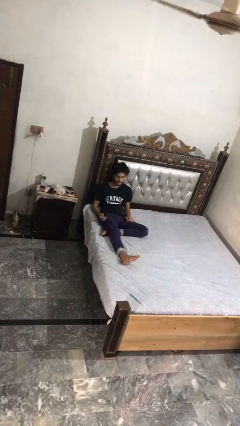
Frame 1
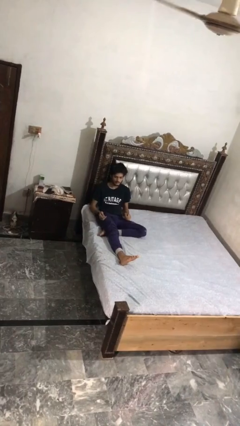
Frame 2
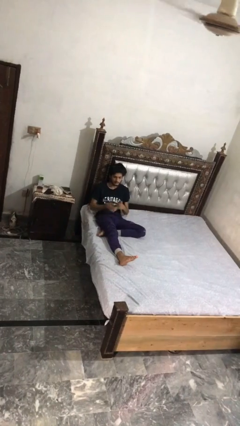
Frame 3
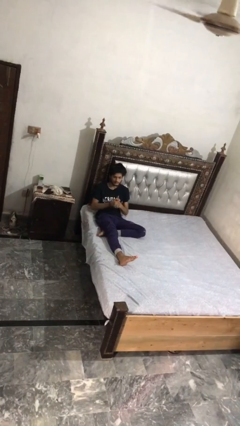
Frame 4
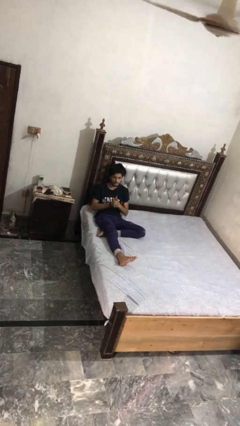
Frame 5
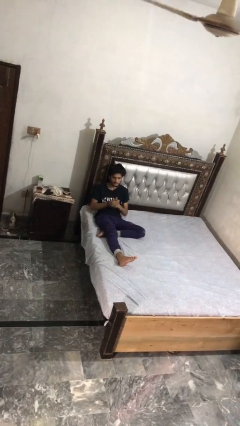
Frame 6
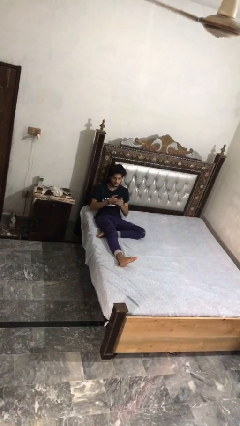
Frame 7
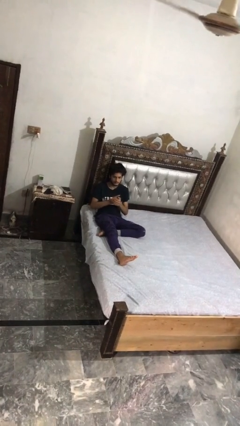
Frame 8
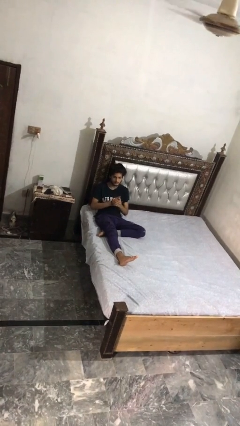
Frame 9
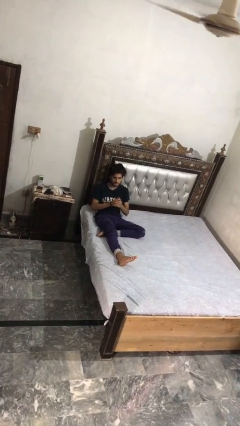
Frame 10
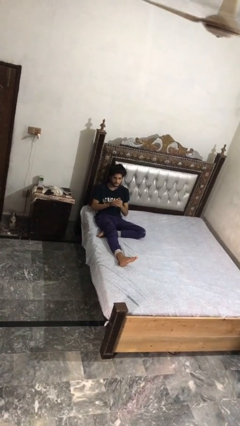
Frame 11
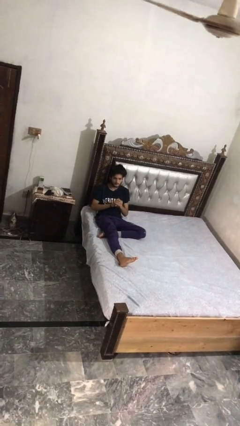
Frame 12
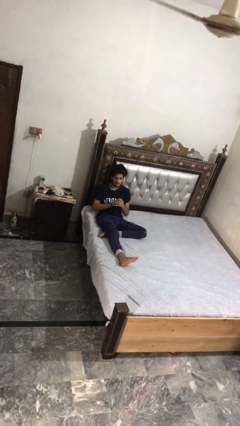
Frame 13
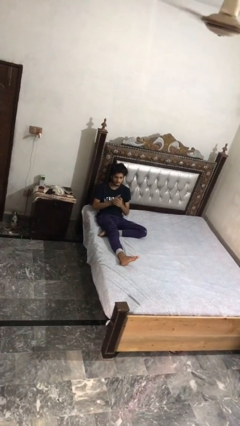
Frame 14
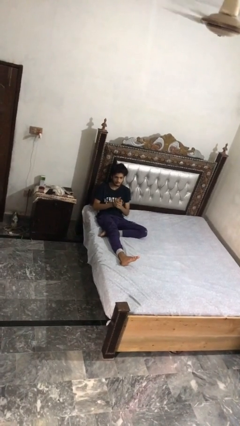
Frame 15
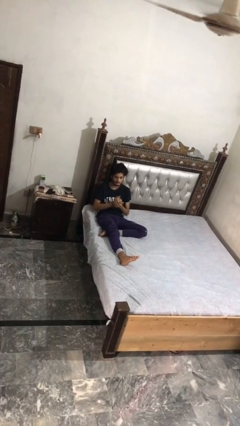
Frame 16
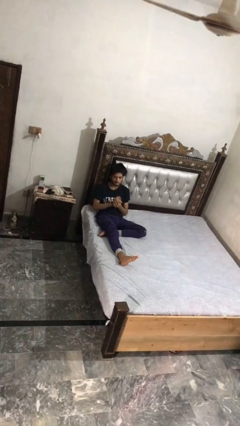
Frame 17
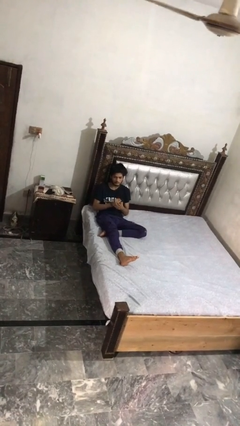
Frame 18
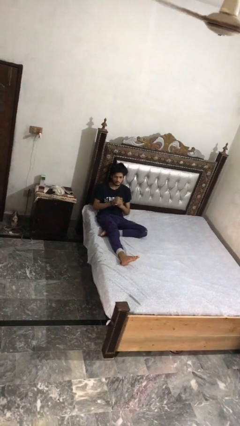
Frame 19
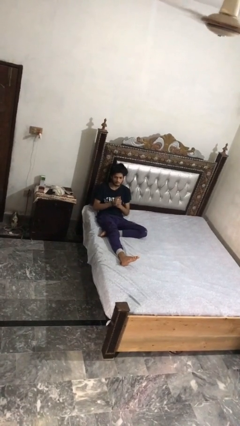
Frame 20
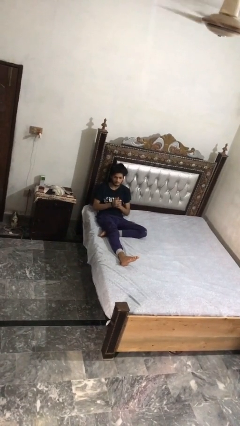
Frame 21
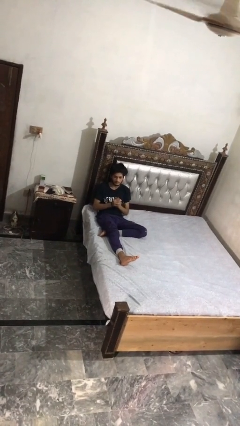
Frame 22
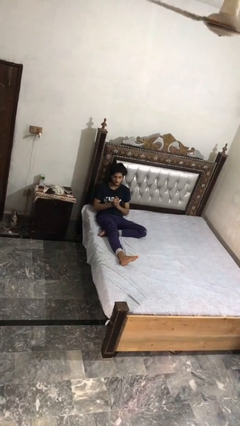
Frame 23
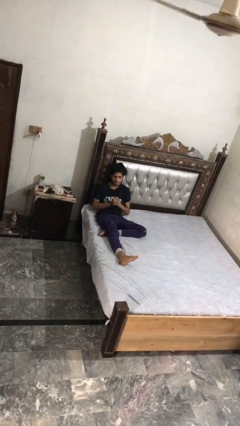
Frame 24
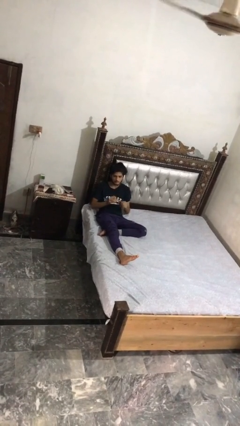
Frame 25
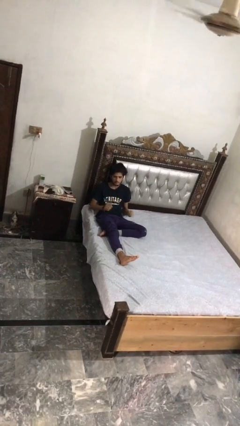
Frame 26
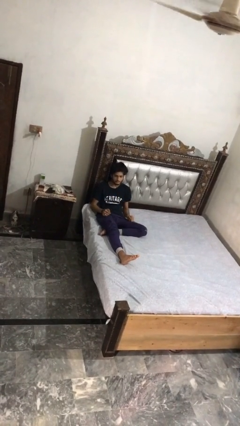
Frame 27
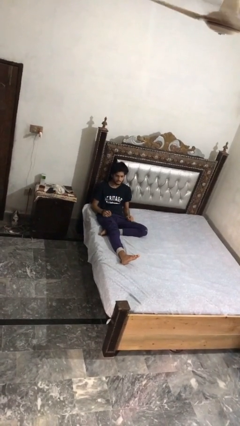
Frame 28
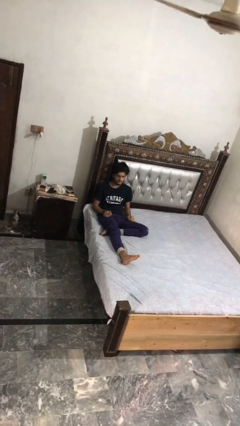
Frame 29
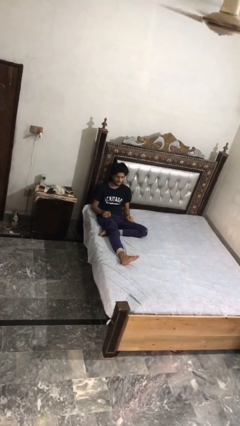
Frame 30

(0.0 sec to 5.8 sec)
person cracks knuckles

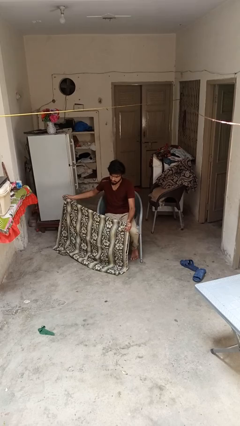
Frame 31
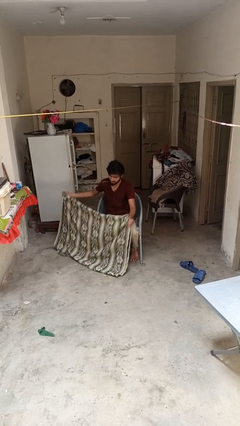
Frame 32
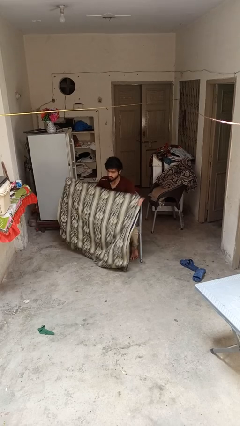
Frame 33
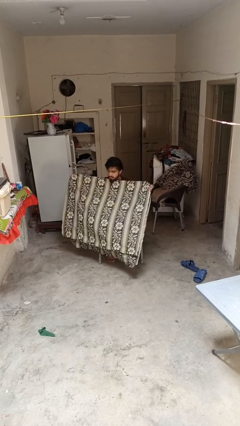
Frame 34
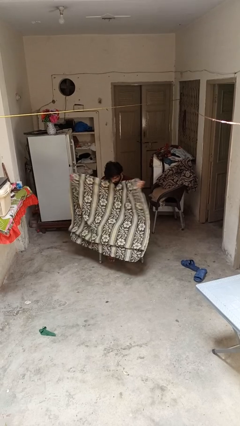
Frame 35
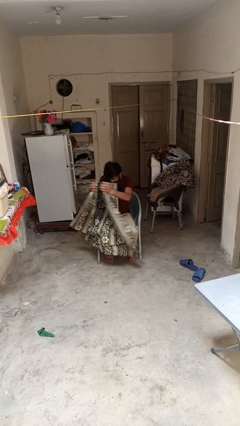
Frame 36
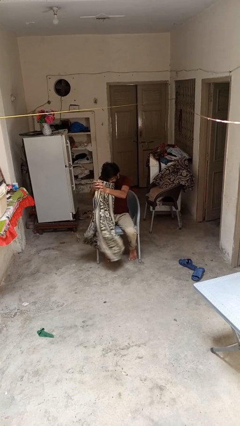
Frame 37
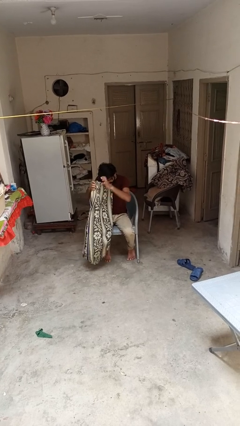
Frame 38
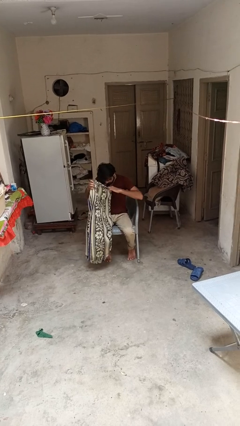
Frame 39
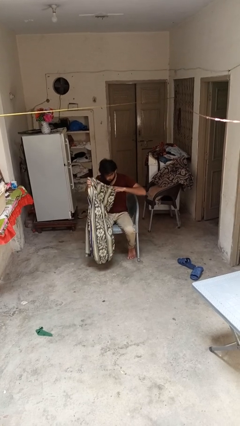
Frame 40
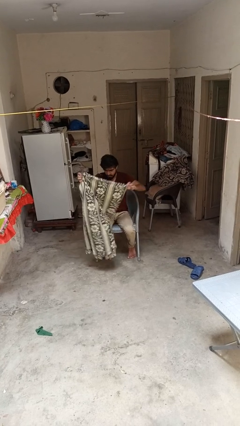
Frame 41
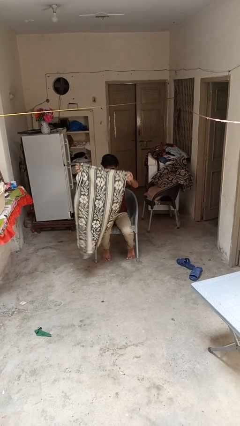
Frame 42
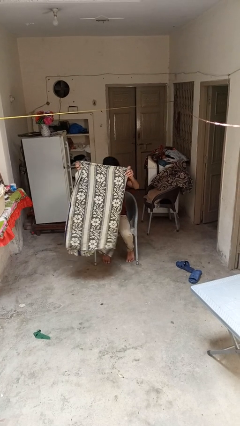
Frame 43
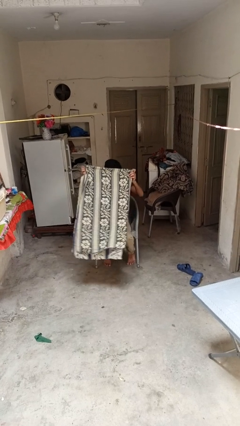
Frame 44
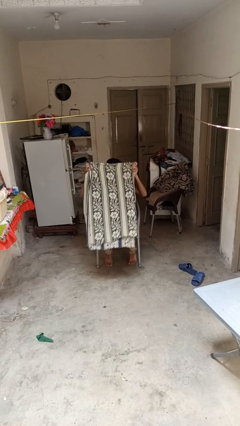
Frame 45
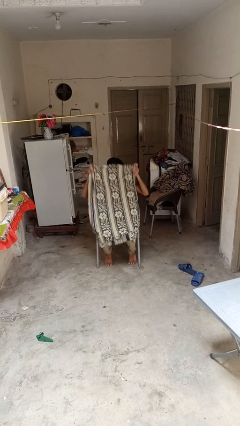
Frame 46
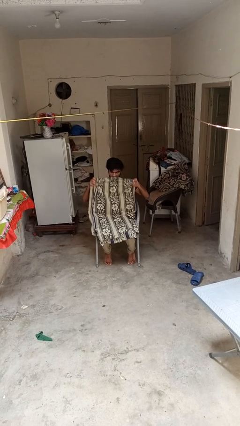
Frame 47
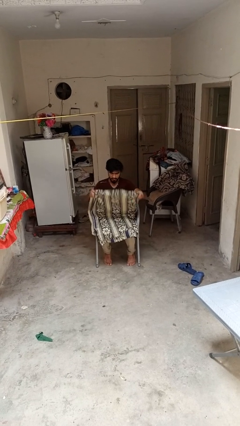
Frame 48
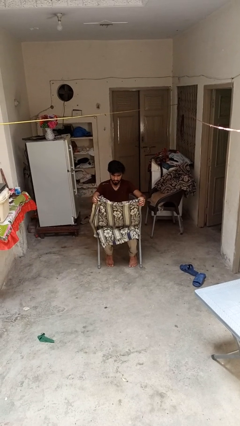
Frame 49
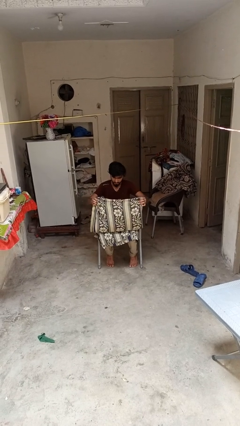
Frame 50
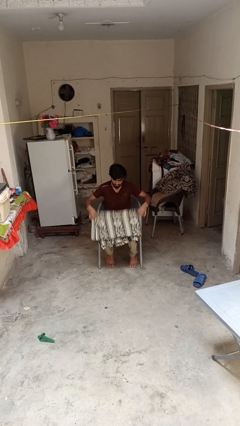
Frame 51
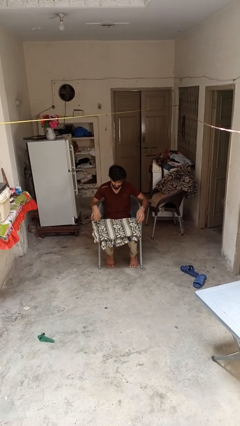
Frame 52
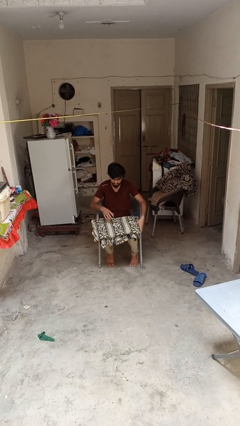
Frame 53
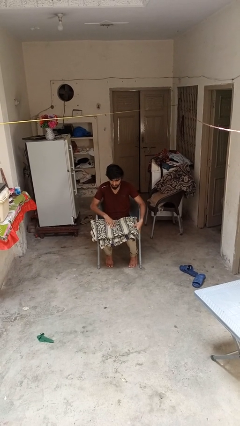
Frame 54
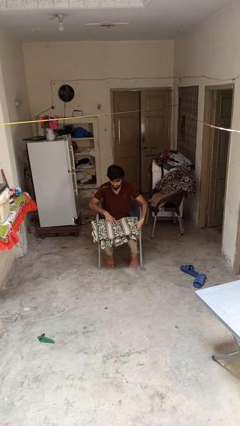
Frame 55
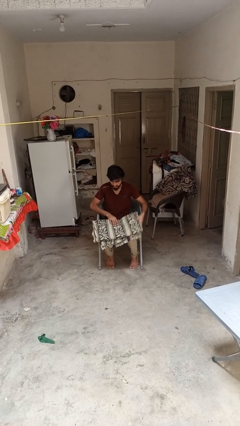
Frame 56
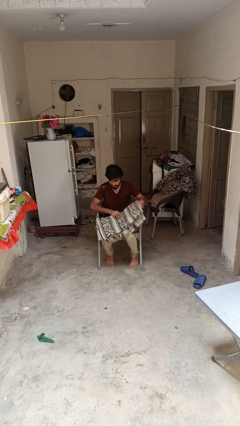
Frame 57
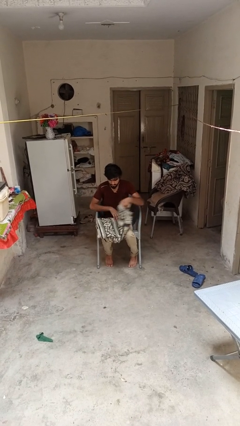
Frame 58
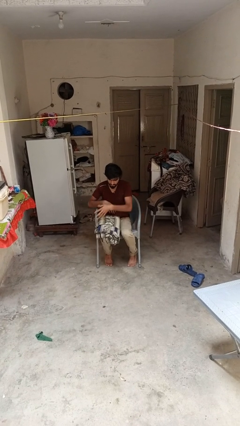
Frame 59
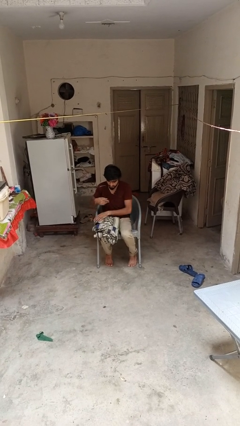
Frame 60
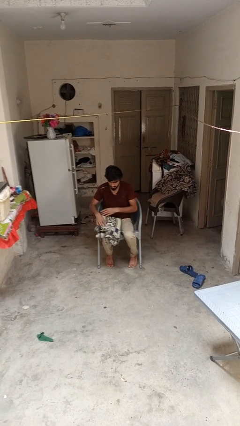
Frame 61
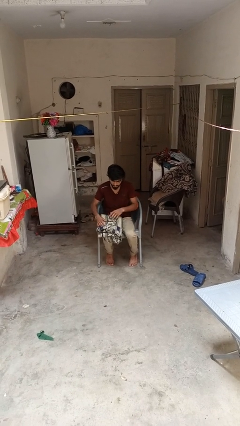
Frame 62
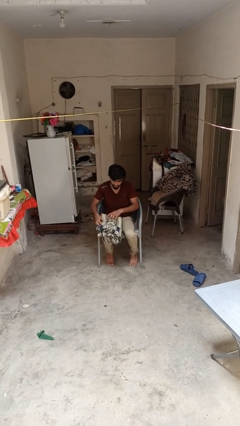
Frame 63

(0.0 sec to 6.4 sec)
person folds blanket

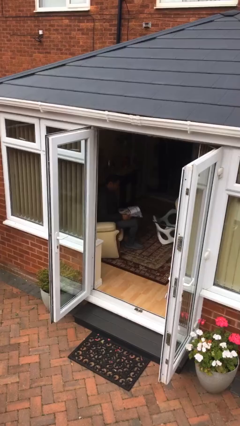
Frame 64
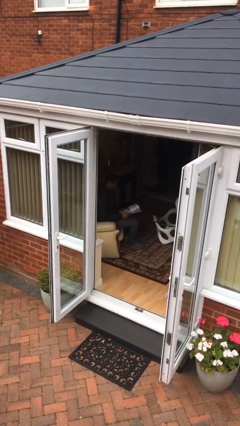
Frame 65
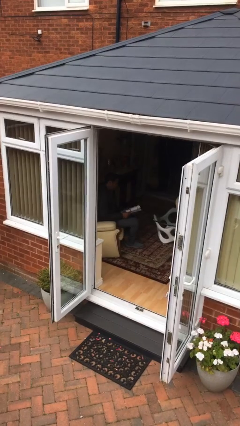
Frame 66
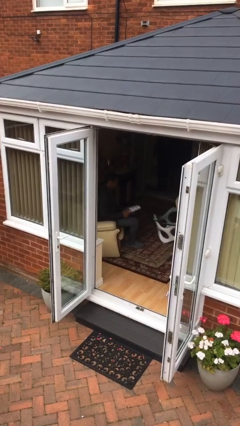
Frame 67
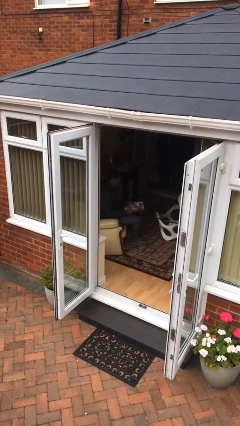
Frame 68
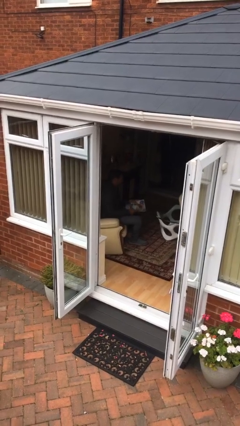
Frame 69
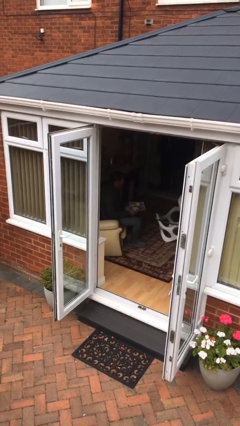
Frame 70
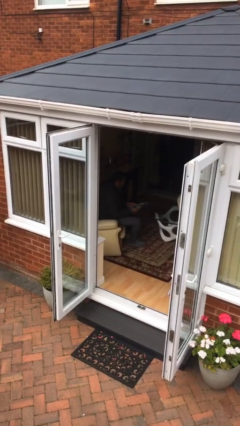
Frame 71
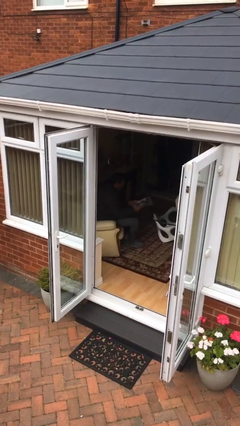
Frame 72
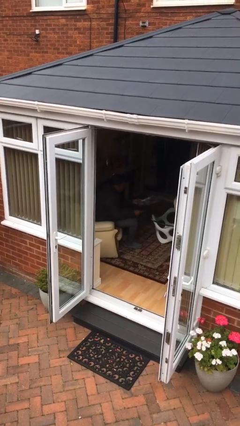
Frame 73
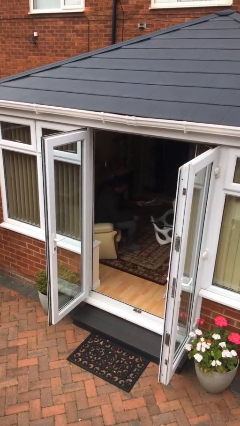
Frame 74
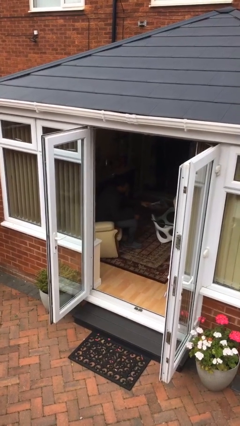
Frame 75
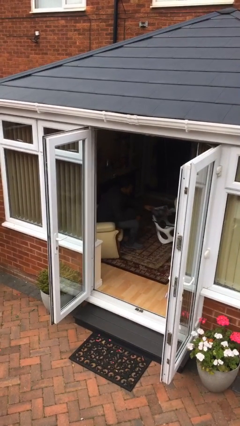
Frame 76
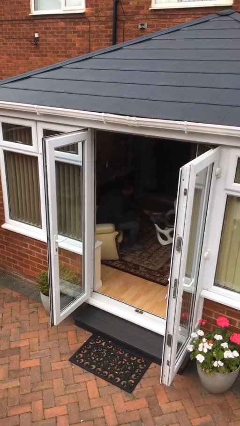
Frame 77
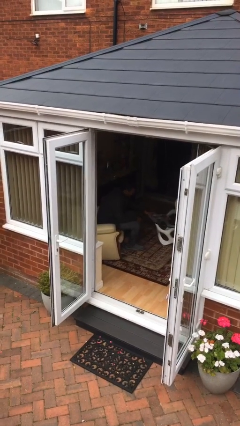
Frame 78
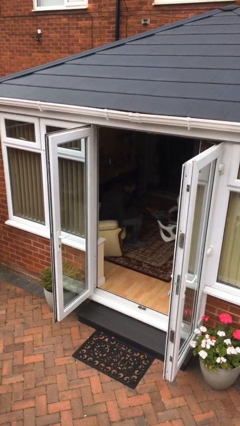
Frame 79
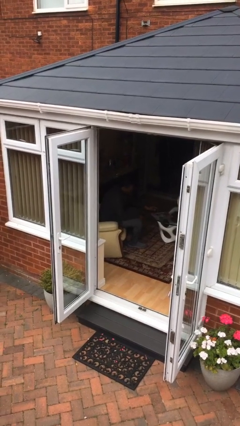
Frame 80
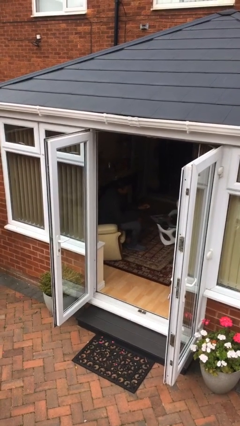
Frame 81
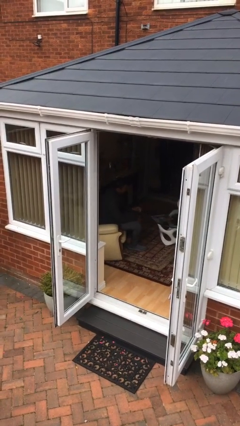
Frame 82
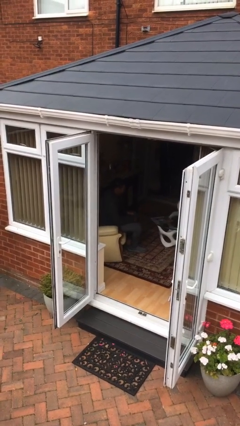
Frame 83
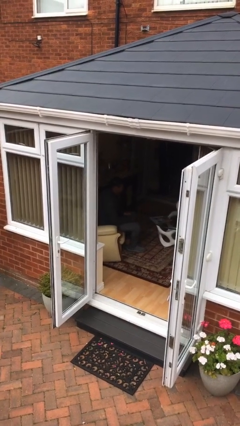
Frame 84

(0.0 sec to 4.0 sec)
person puts down object on table

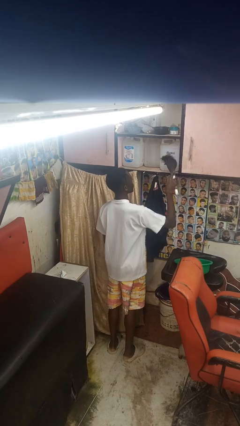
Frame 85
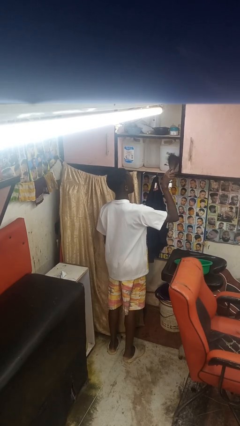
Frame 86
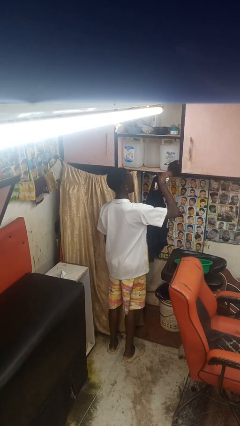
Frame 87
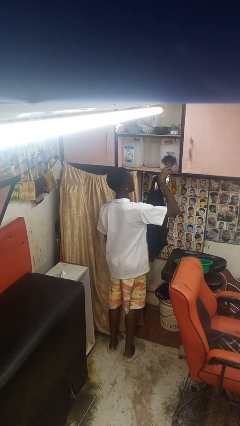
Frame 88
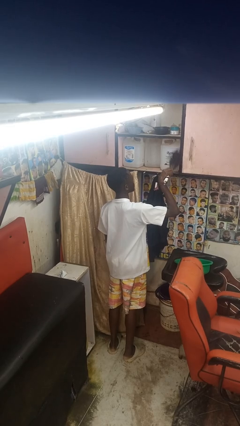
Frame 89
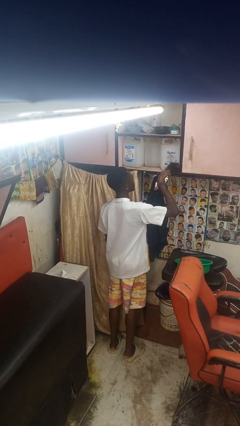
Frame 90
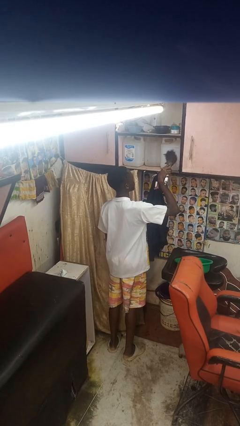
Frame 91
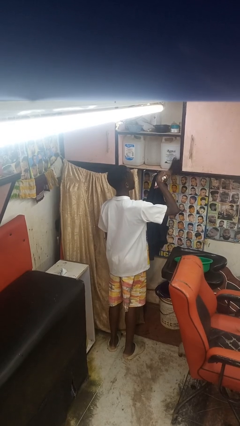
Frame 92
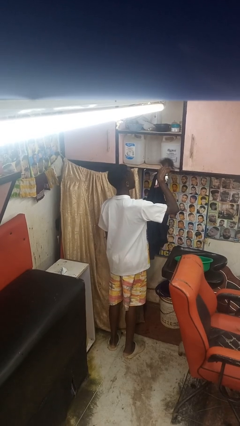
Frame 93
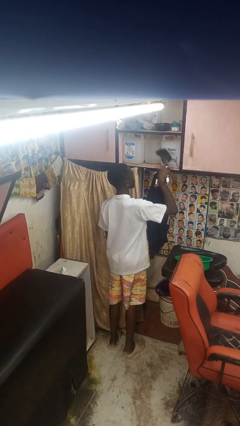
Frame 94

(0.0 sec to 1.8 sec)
person dusts furniture
